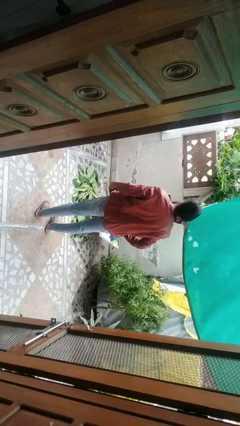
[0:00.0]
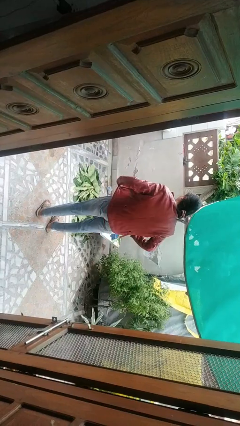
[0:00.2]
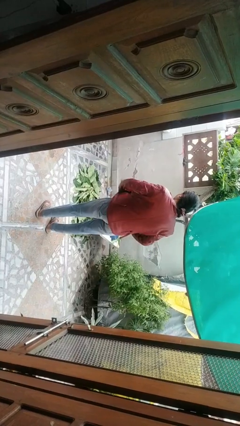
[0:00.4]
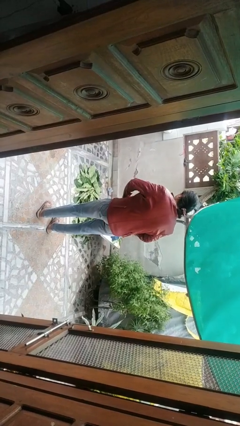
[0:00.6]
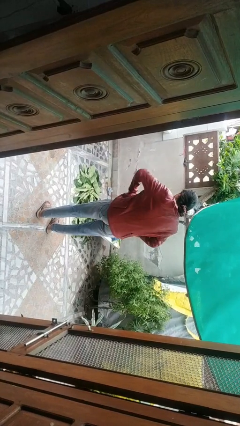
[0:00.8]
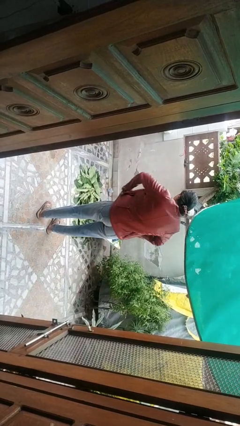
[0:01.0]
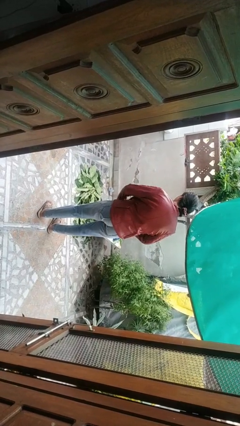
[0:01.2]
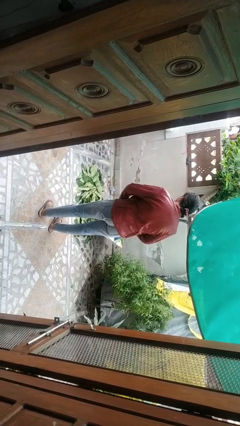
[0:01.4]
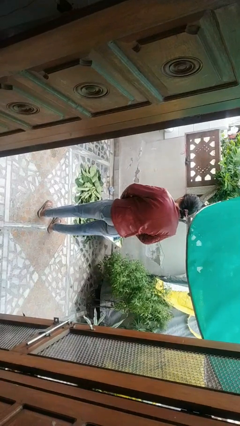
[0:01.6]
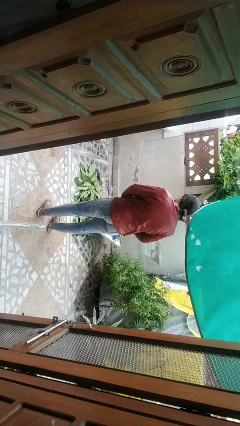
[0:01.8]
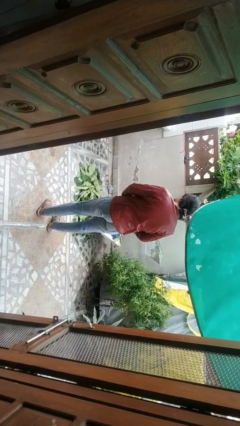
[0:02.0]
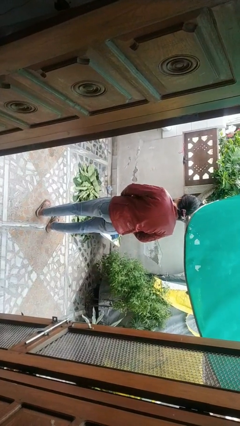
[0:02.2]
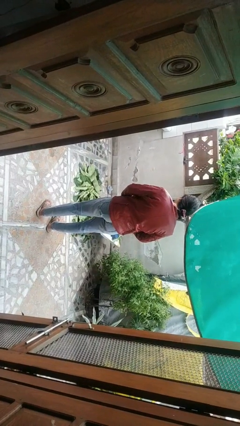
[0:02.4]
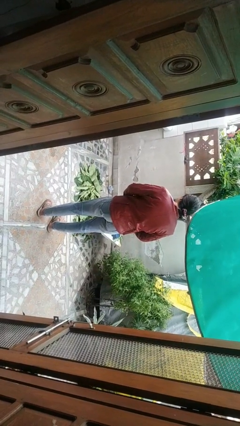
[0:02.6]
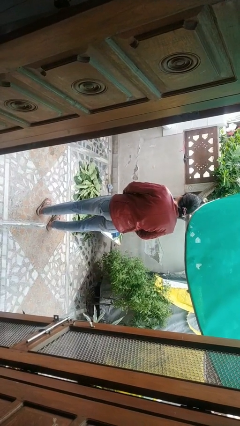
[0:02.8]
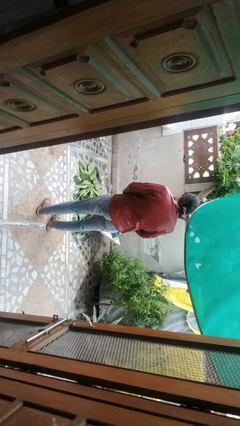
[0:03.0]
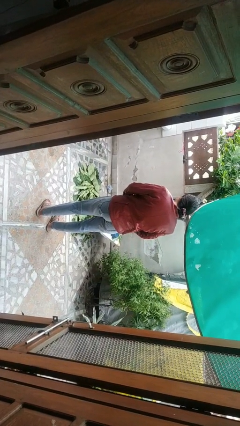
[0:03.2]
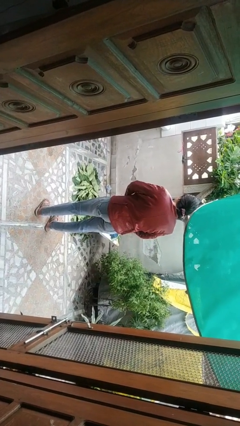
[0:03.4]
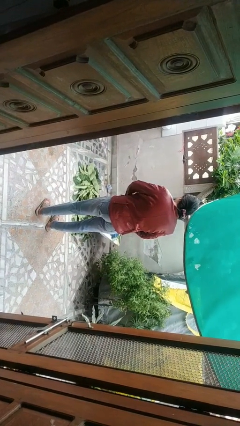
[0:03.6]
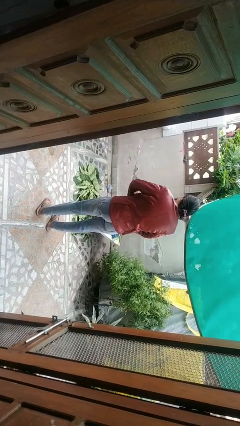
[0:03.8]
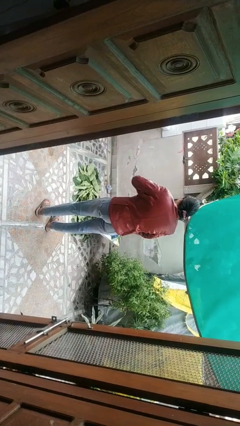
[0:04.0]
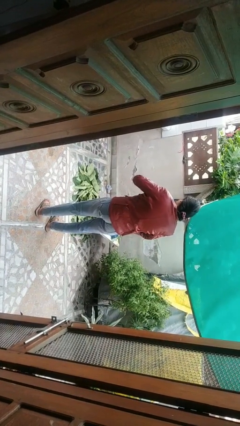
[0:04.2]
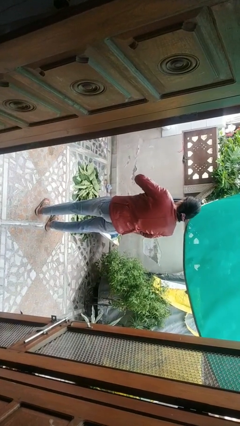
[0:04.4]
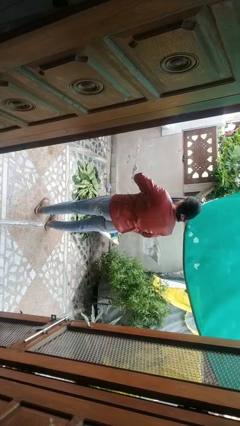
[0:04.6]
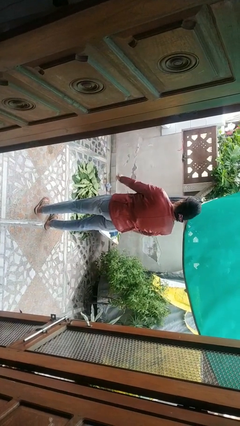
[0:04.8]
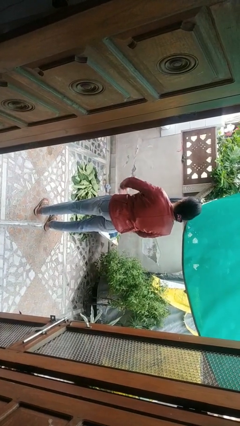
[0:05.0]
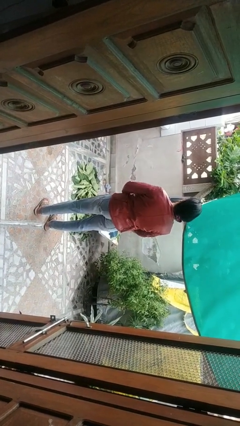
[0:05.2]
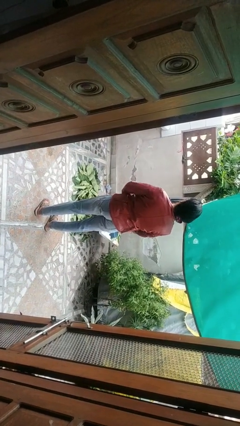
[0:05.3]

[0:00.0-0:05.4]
person zips up jacket

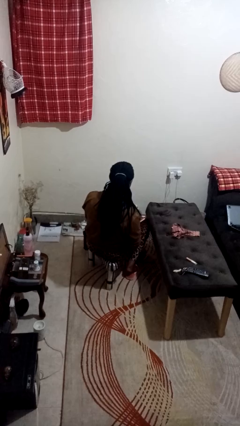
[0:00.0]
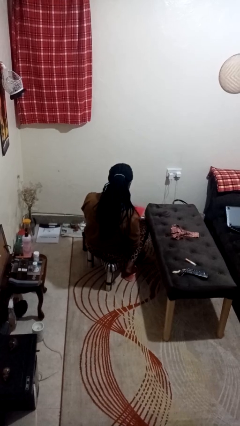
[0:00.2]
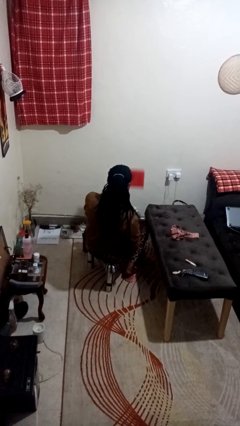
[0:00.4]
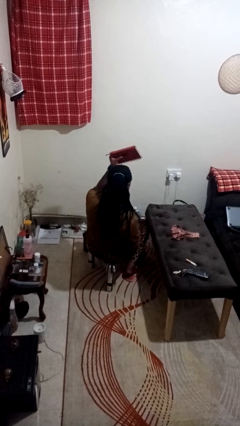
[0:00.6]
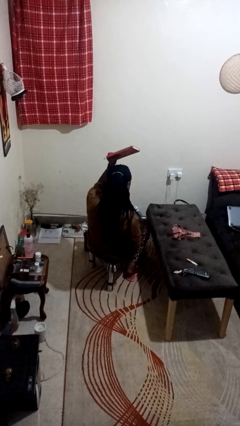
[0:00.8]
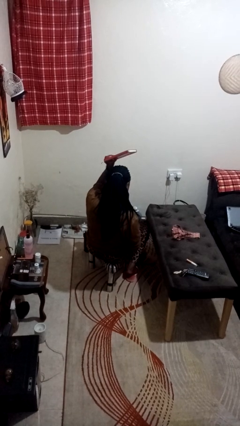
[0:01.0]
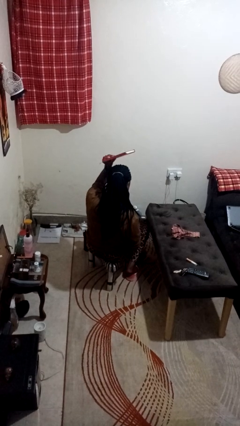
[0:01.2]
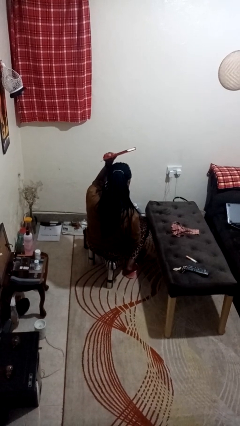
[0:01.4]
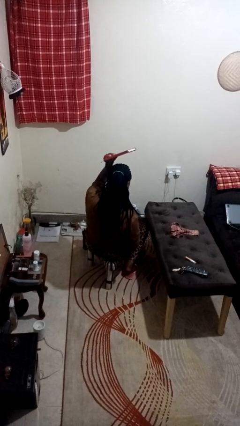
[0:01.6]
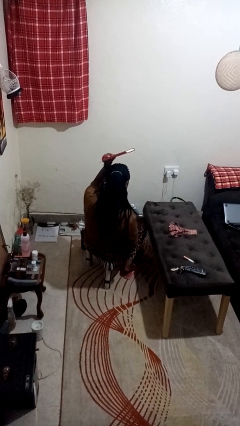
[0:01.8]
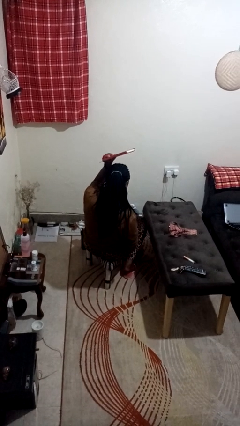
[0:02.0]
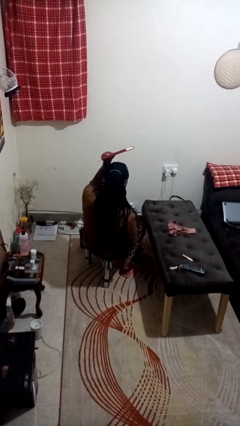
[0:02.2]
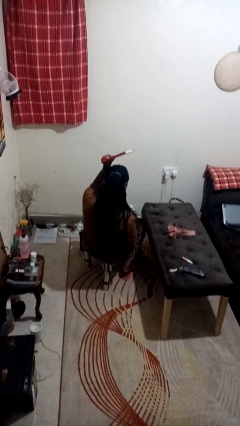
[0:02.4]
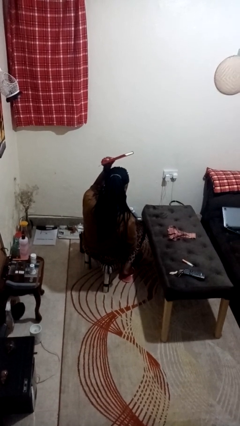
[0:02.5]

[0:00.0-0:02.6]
person holds object above head

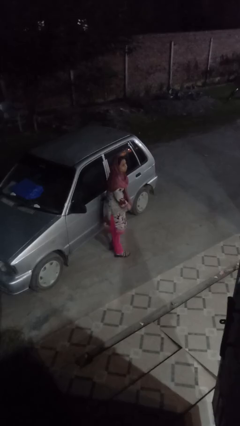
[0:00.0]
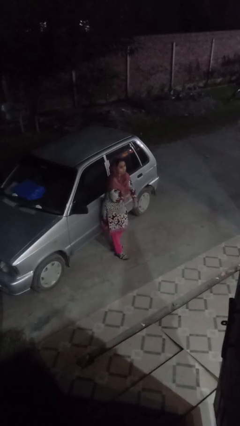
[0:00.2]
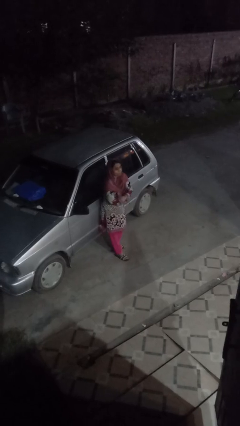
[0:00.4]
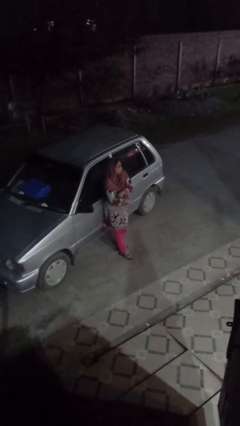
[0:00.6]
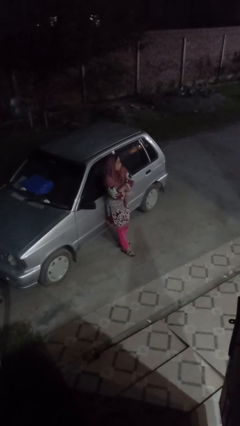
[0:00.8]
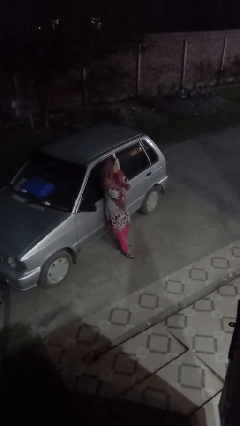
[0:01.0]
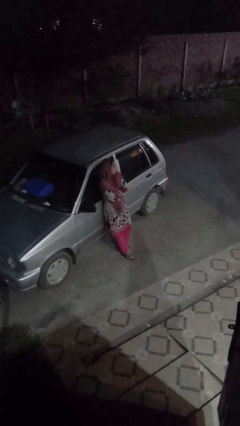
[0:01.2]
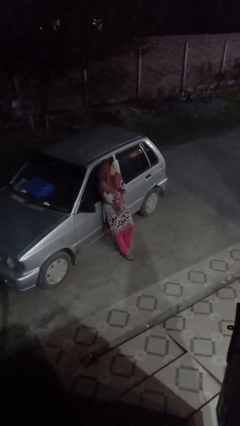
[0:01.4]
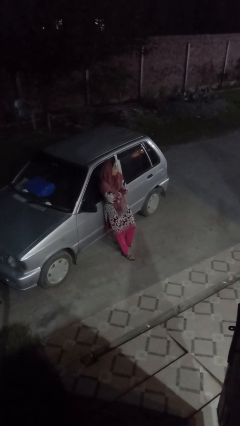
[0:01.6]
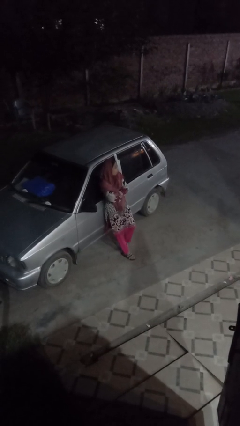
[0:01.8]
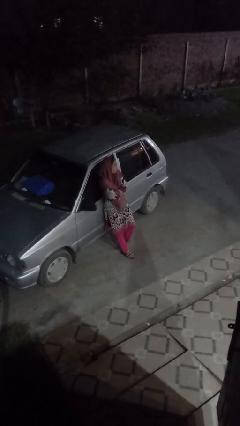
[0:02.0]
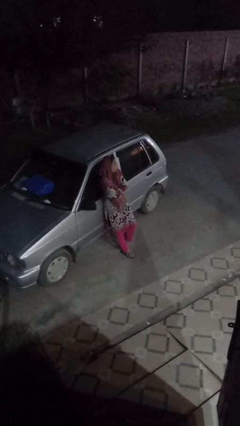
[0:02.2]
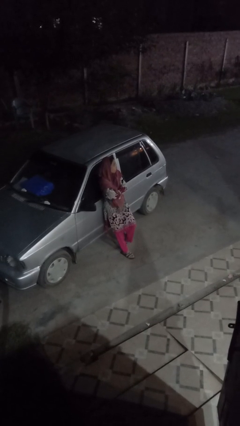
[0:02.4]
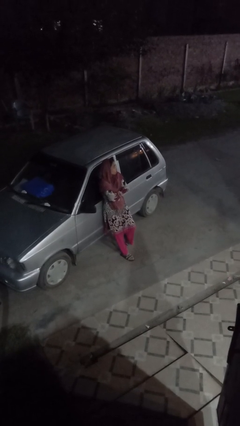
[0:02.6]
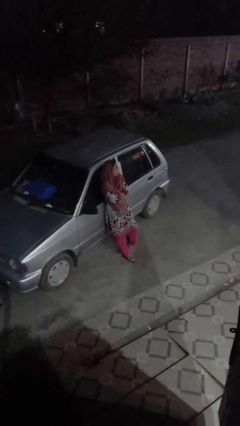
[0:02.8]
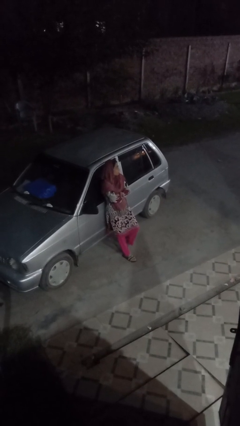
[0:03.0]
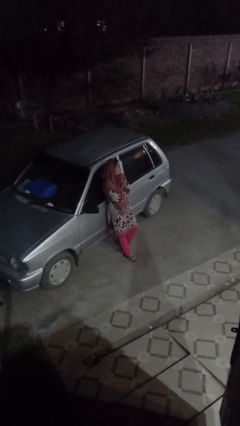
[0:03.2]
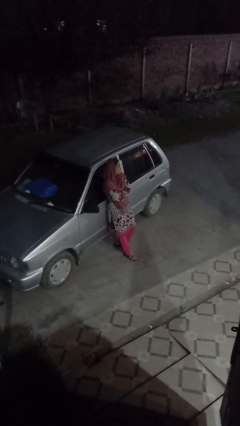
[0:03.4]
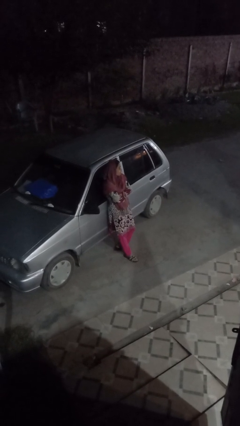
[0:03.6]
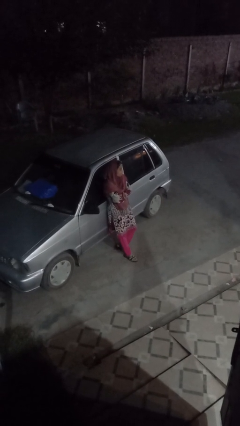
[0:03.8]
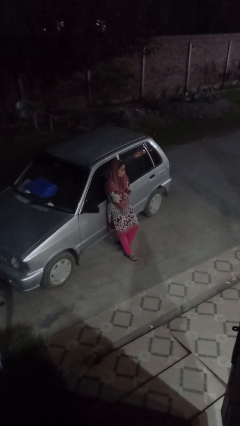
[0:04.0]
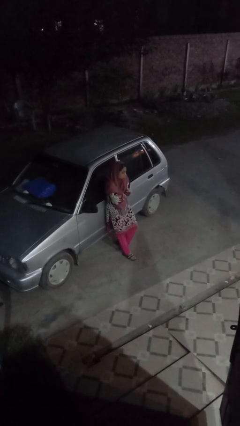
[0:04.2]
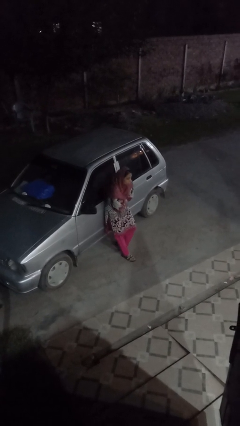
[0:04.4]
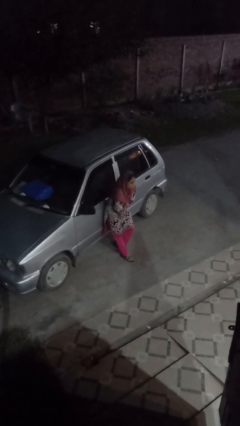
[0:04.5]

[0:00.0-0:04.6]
person leans against car

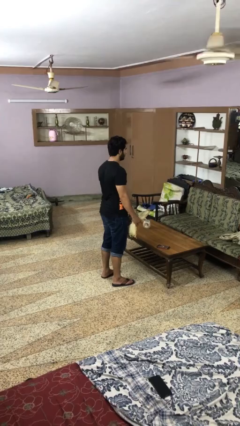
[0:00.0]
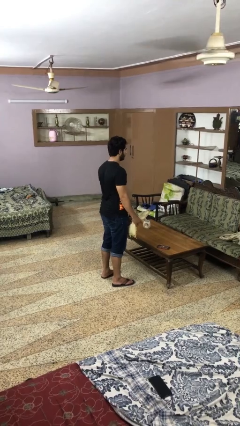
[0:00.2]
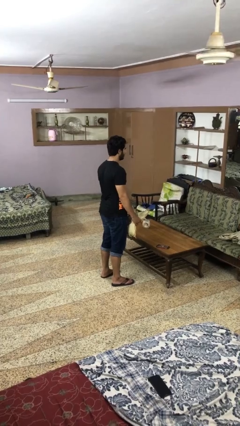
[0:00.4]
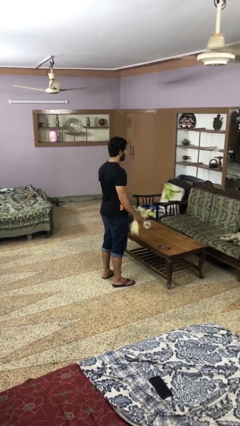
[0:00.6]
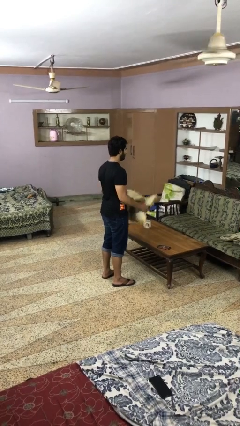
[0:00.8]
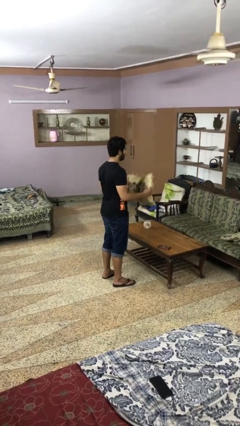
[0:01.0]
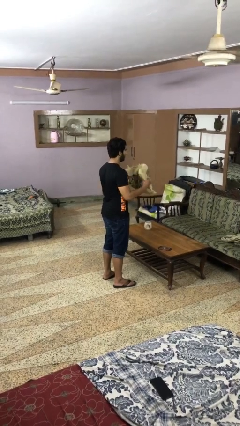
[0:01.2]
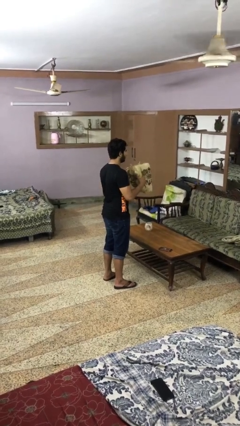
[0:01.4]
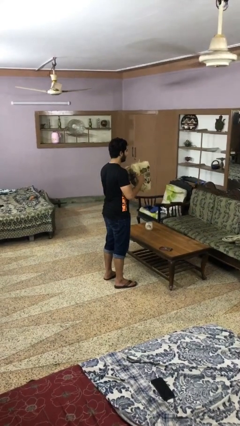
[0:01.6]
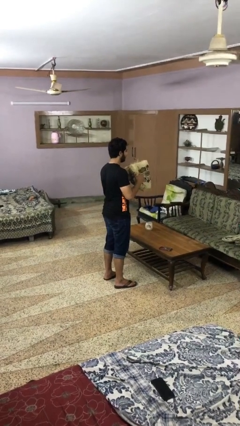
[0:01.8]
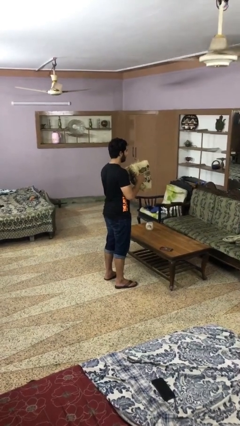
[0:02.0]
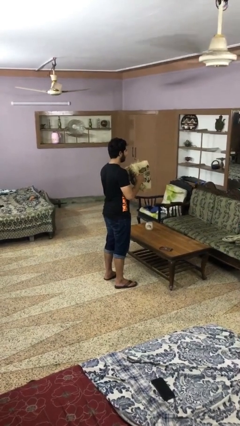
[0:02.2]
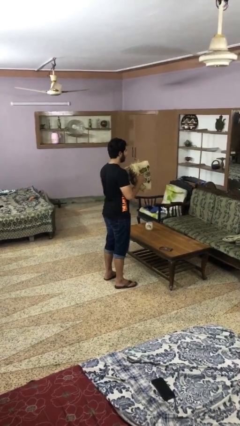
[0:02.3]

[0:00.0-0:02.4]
person squeezes object

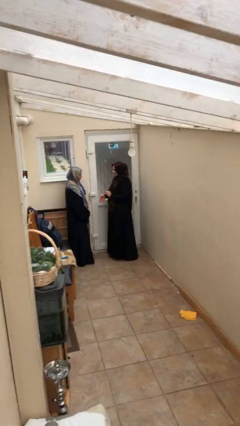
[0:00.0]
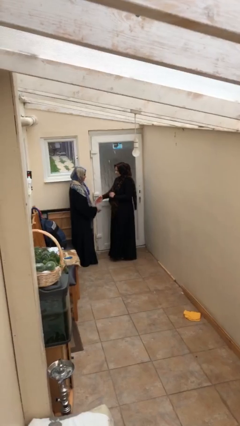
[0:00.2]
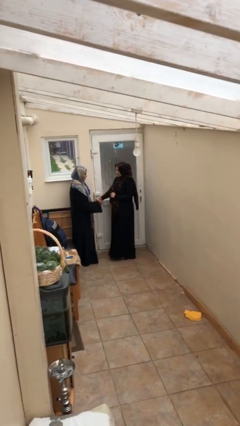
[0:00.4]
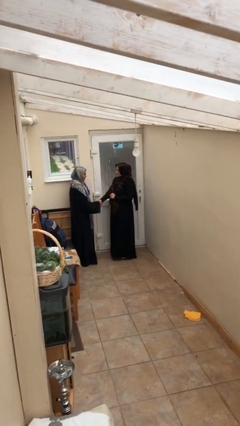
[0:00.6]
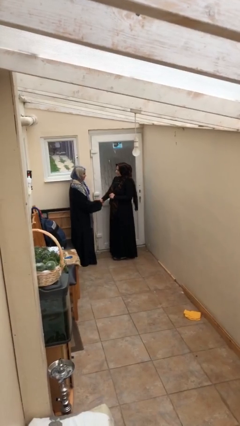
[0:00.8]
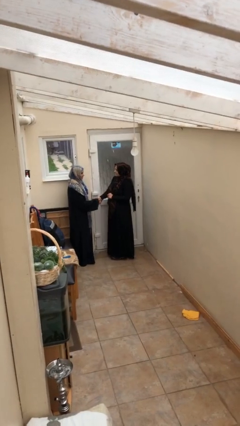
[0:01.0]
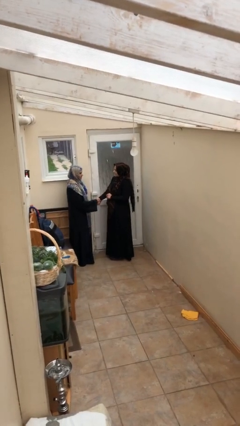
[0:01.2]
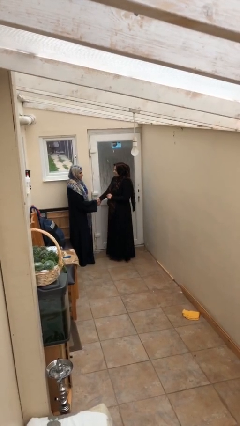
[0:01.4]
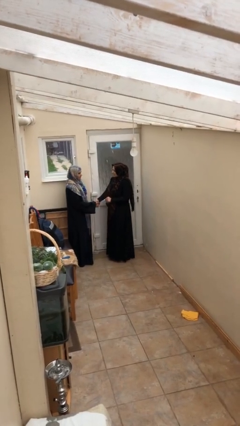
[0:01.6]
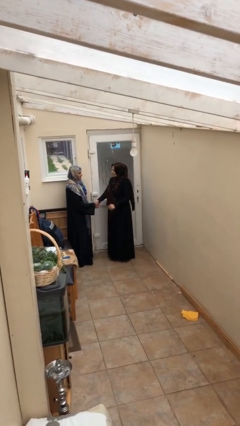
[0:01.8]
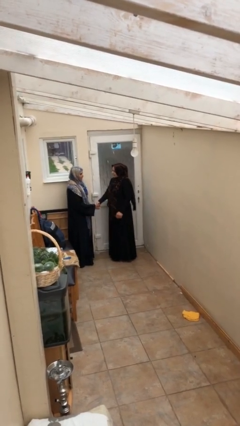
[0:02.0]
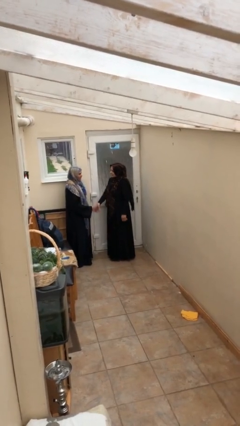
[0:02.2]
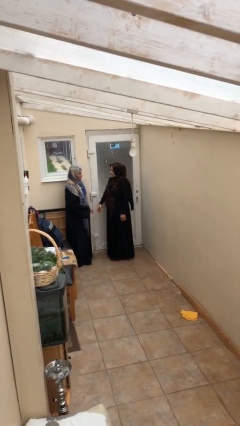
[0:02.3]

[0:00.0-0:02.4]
person shakes hand
